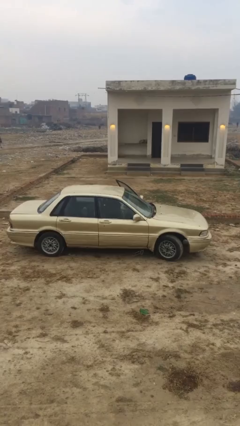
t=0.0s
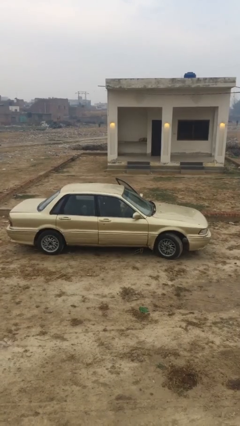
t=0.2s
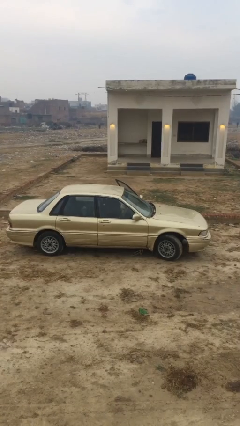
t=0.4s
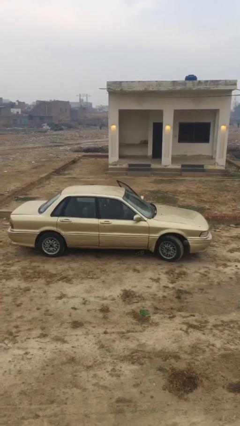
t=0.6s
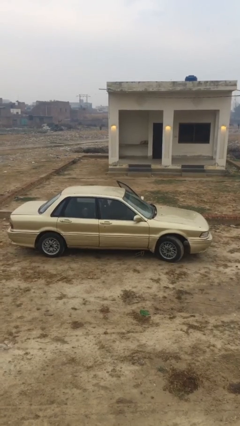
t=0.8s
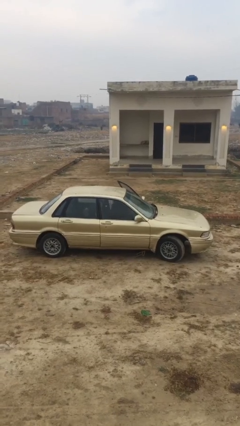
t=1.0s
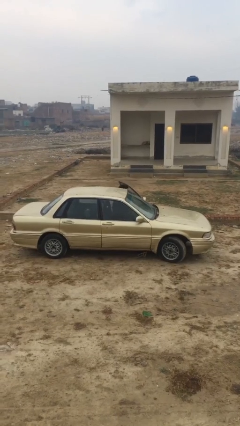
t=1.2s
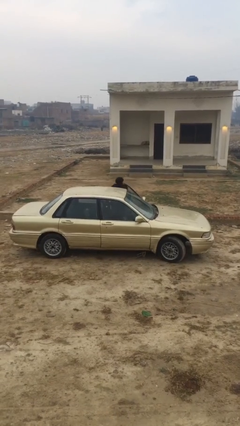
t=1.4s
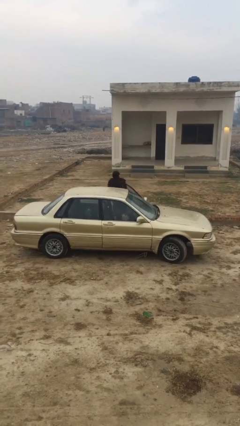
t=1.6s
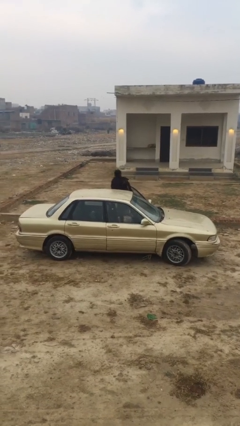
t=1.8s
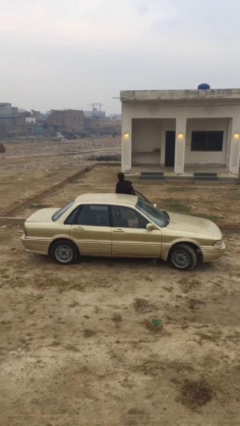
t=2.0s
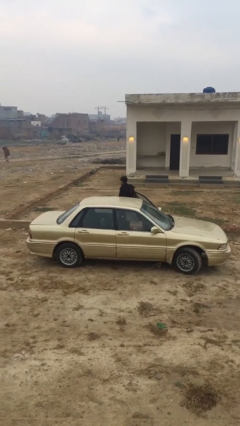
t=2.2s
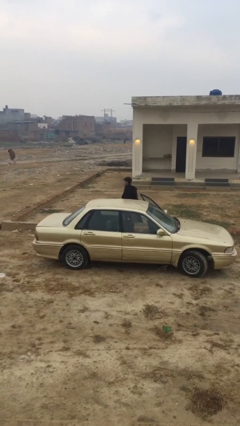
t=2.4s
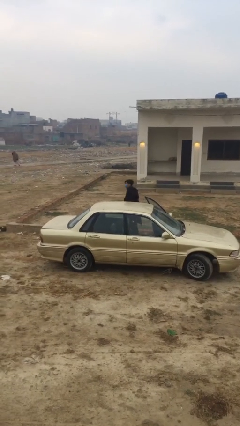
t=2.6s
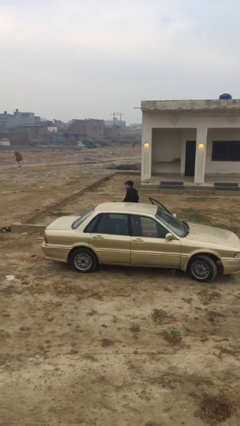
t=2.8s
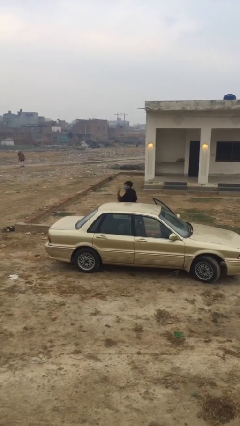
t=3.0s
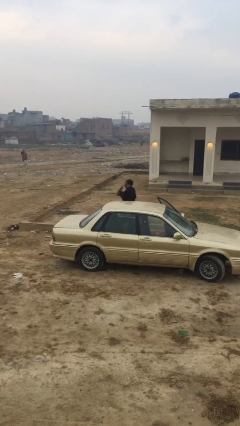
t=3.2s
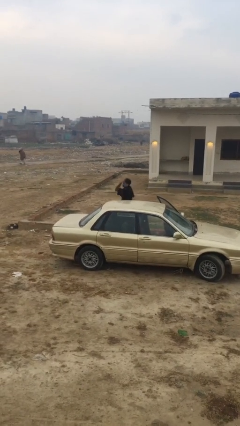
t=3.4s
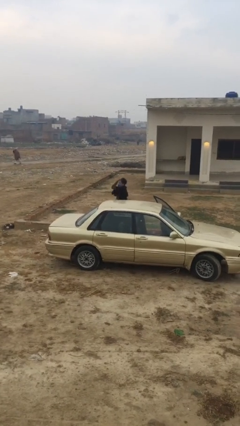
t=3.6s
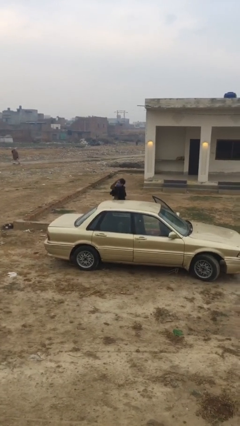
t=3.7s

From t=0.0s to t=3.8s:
person exits car

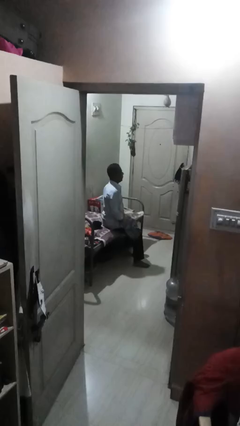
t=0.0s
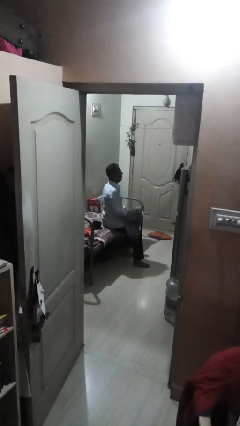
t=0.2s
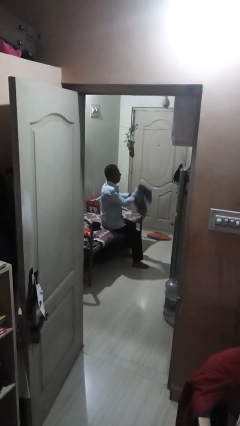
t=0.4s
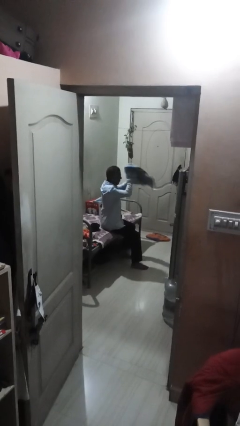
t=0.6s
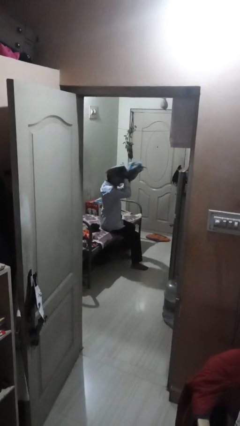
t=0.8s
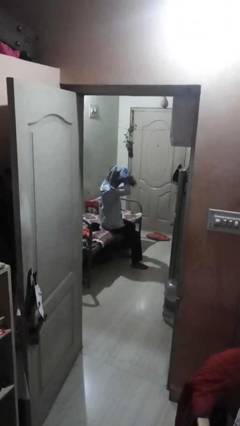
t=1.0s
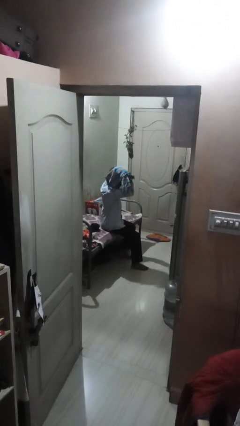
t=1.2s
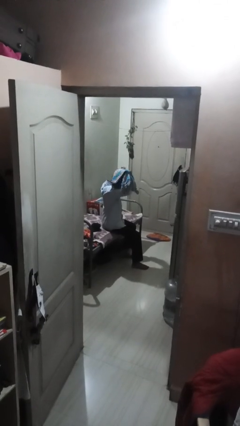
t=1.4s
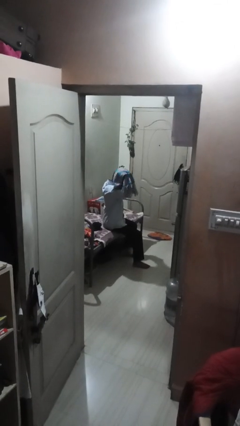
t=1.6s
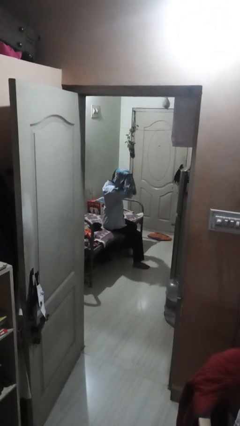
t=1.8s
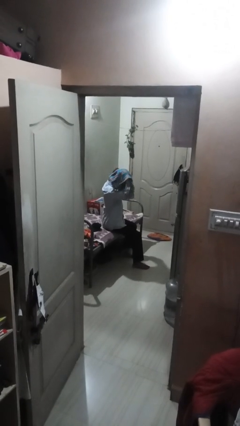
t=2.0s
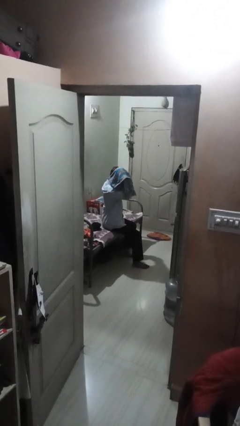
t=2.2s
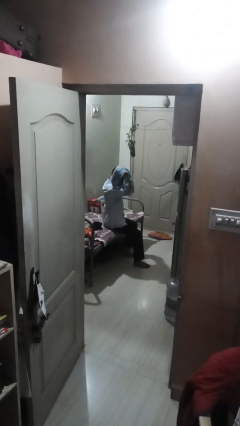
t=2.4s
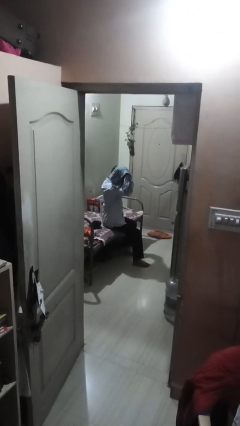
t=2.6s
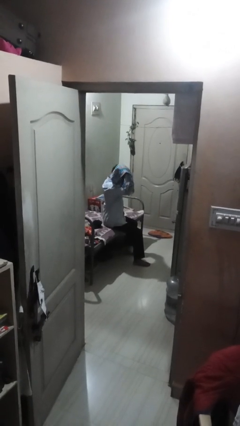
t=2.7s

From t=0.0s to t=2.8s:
person gestures listen closely

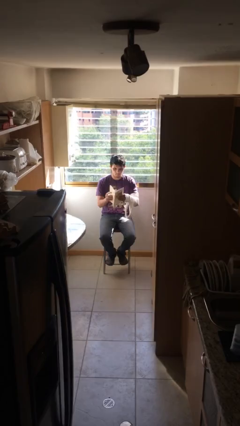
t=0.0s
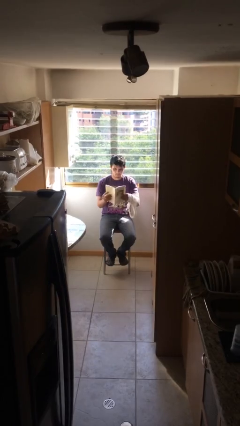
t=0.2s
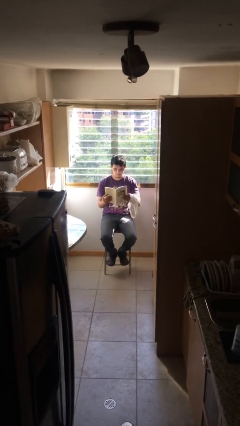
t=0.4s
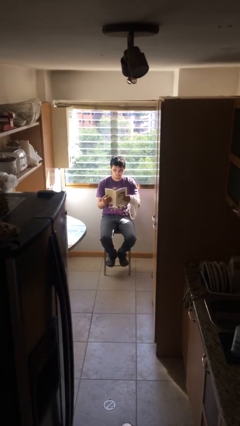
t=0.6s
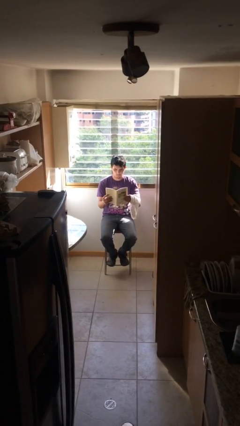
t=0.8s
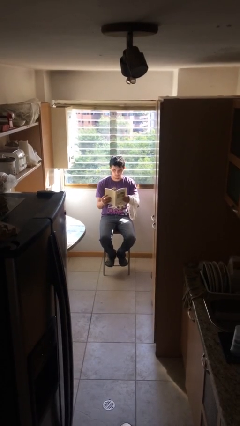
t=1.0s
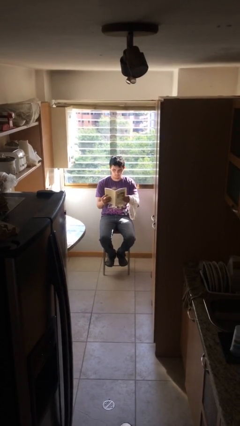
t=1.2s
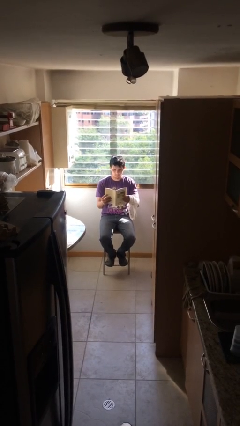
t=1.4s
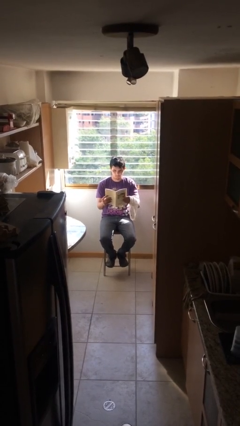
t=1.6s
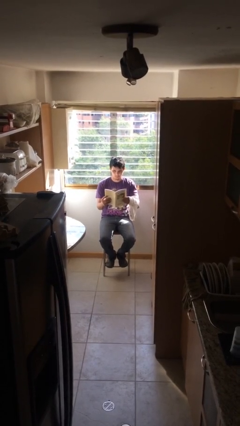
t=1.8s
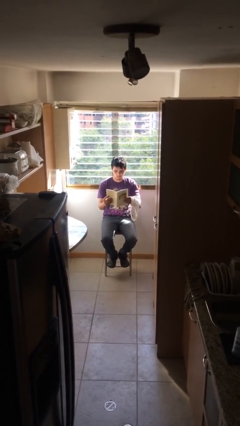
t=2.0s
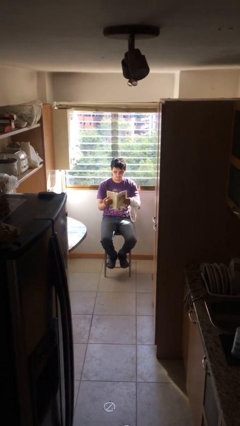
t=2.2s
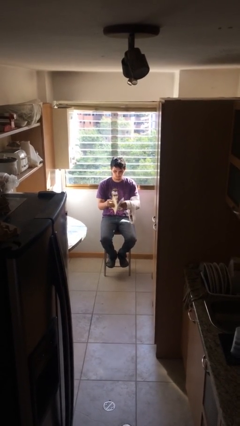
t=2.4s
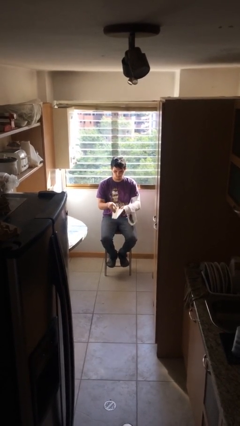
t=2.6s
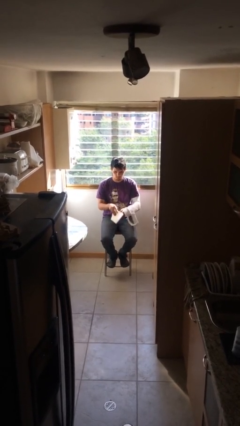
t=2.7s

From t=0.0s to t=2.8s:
person reads document

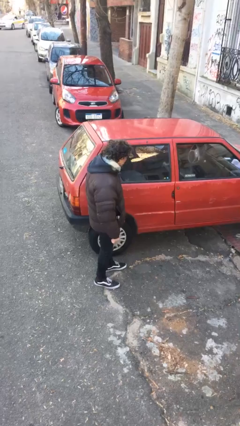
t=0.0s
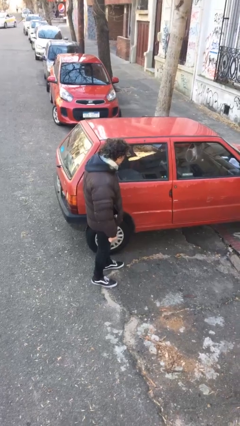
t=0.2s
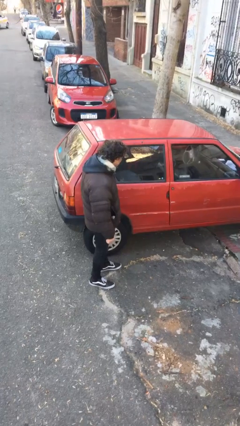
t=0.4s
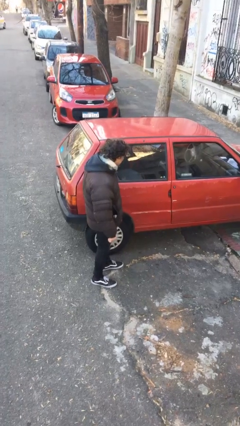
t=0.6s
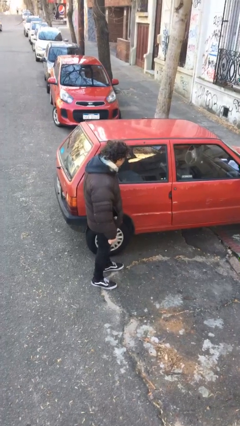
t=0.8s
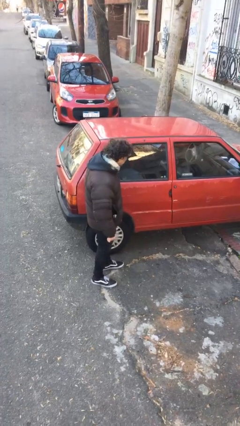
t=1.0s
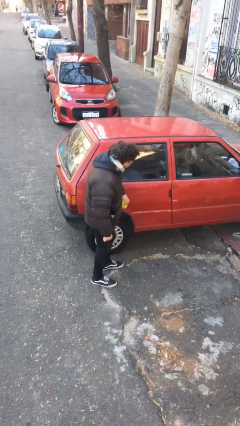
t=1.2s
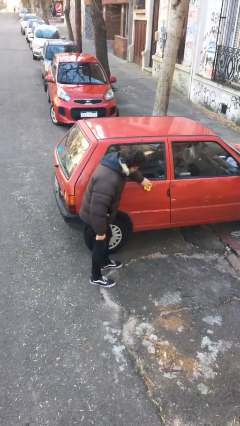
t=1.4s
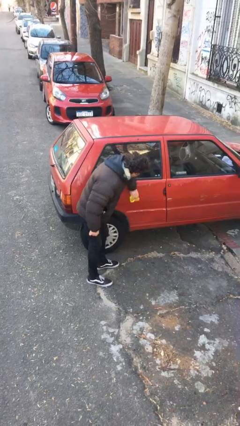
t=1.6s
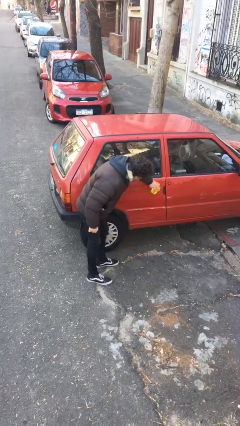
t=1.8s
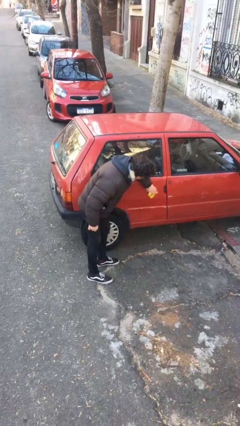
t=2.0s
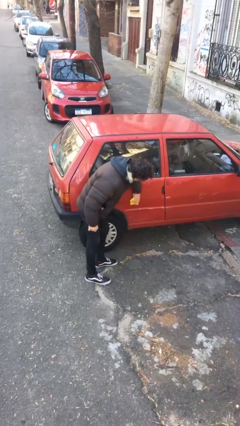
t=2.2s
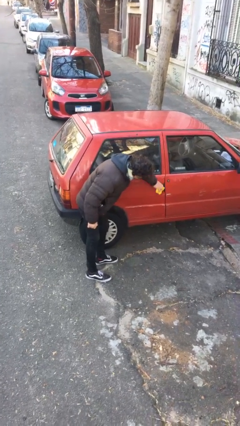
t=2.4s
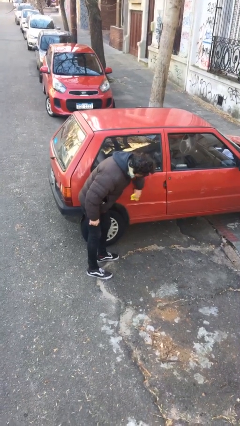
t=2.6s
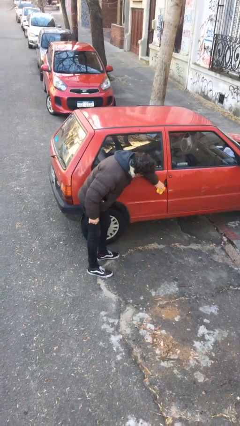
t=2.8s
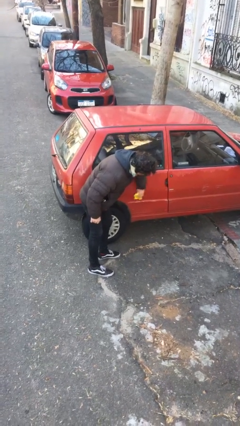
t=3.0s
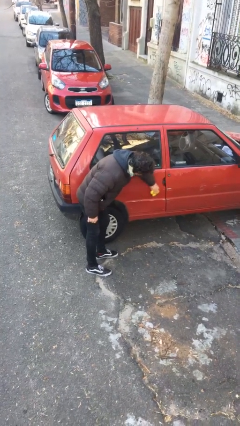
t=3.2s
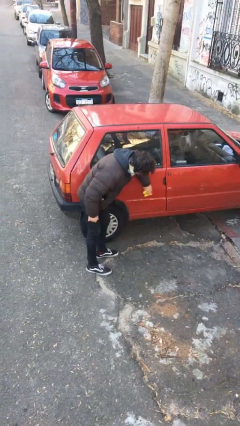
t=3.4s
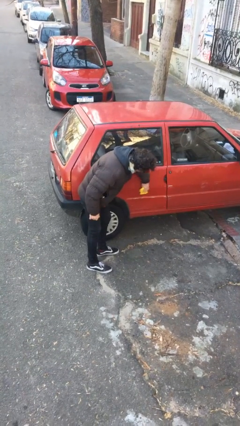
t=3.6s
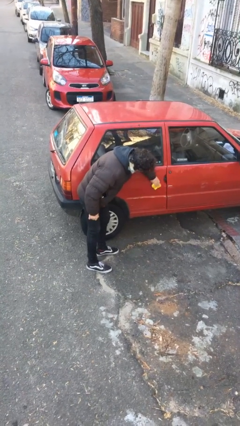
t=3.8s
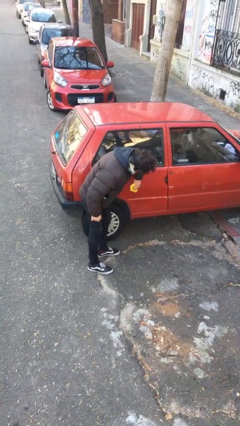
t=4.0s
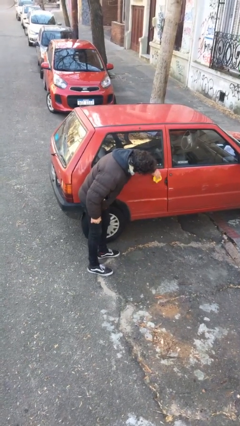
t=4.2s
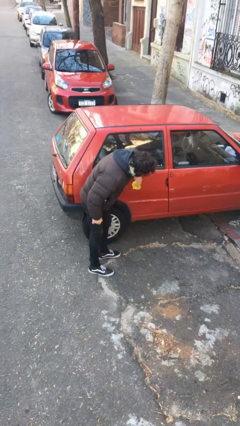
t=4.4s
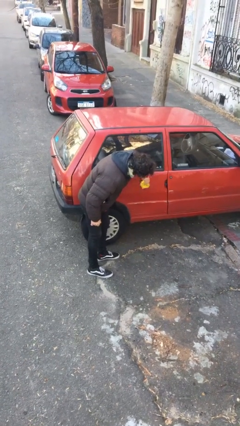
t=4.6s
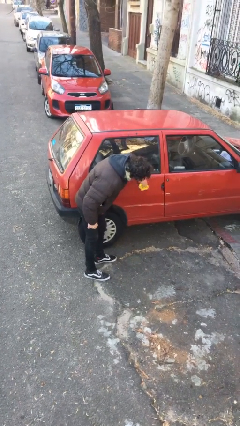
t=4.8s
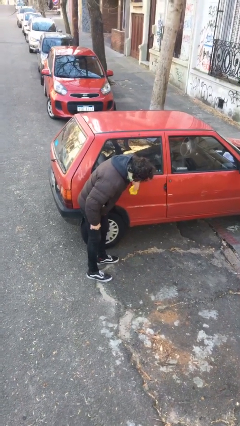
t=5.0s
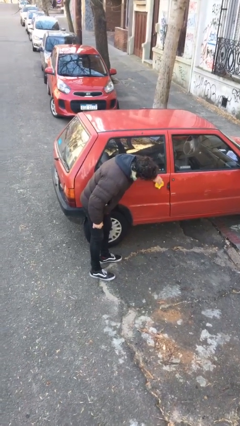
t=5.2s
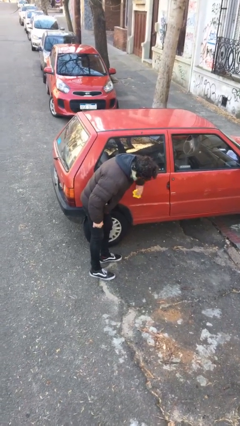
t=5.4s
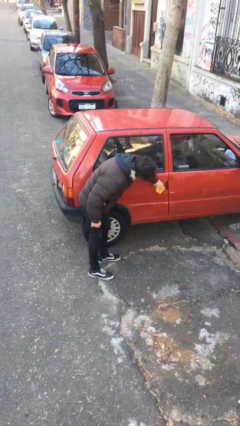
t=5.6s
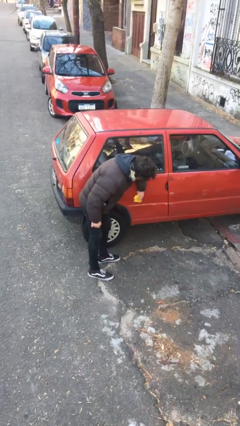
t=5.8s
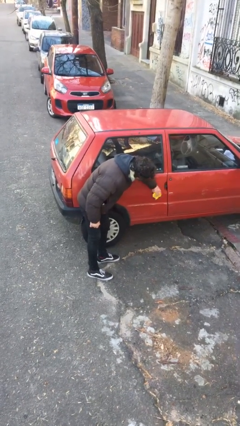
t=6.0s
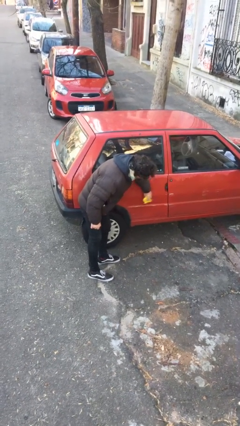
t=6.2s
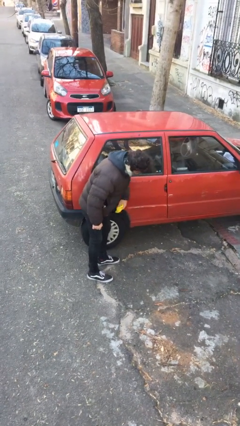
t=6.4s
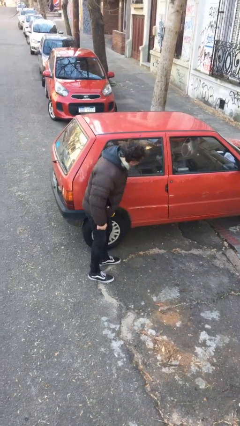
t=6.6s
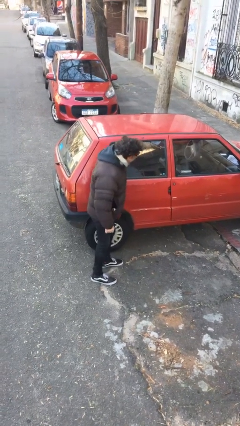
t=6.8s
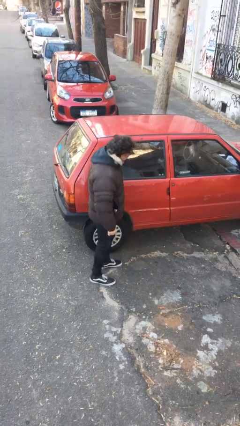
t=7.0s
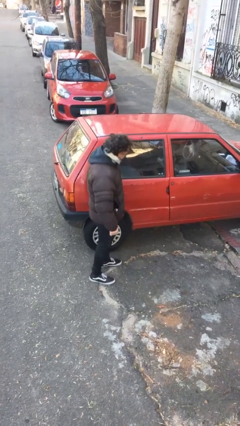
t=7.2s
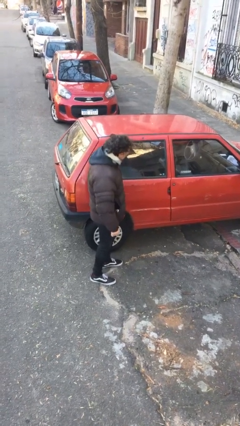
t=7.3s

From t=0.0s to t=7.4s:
person polishes car with rag

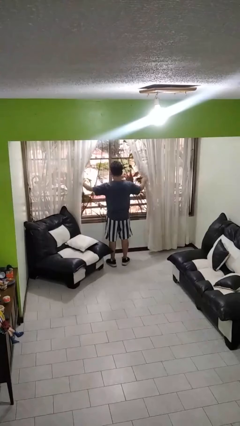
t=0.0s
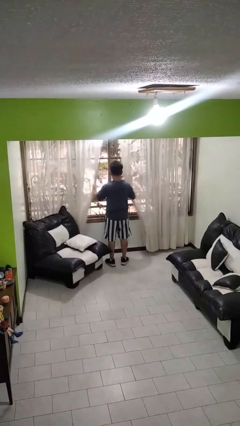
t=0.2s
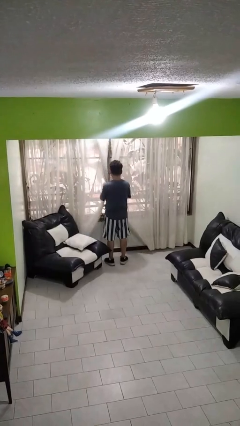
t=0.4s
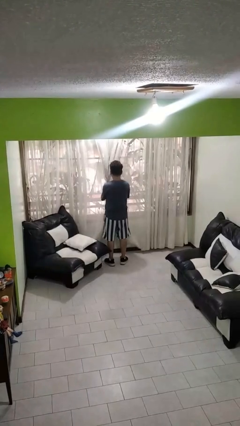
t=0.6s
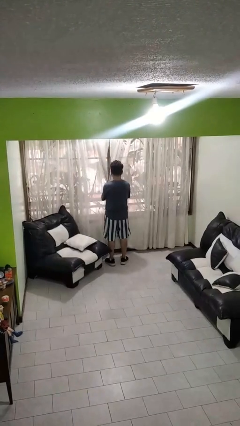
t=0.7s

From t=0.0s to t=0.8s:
person closes curtains

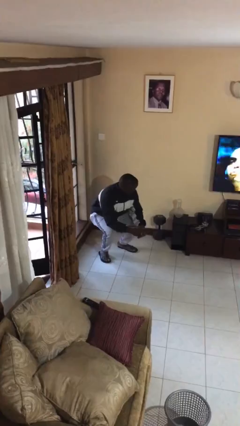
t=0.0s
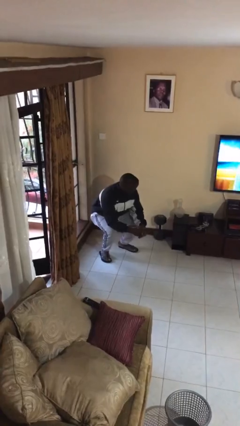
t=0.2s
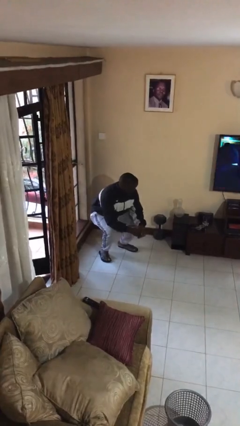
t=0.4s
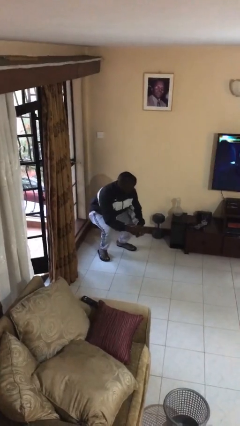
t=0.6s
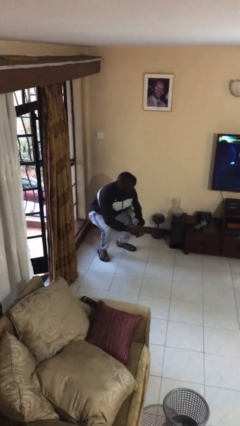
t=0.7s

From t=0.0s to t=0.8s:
person stands up
